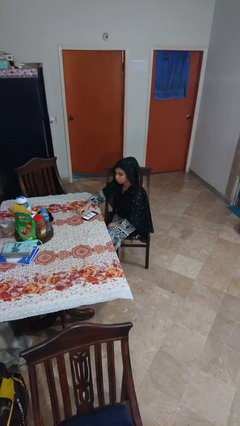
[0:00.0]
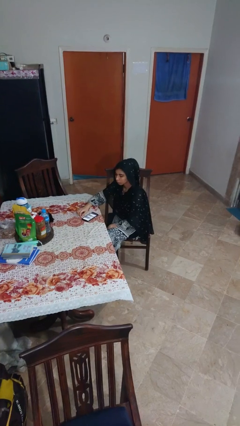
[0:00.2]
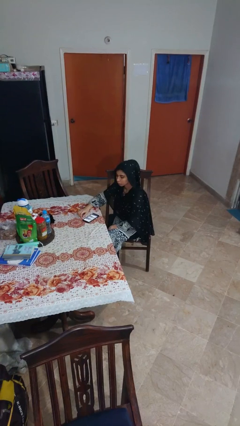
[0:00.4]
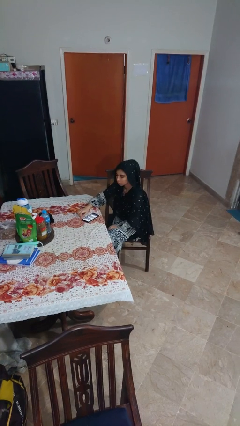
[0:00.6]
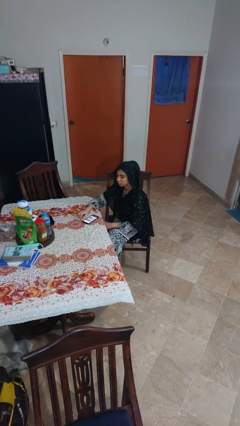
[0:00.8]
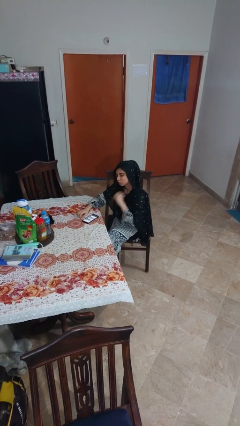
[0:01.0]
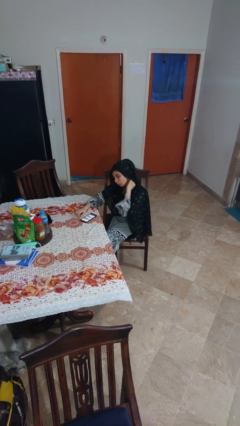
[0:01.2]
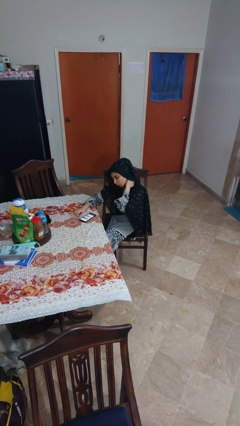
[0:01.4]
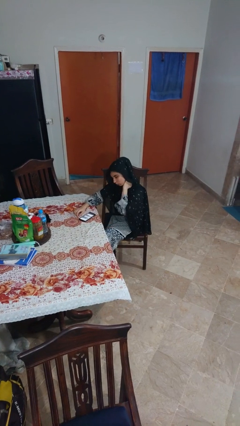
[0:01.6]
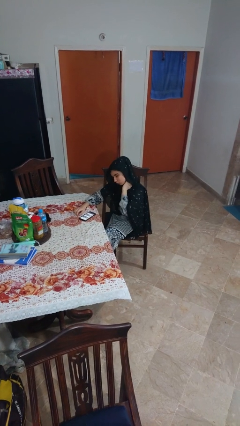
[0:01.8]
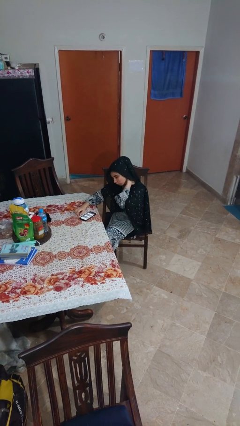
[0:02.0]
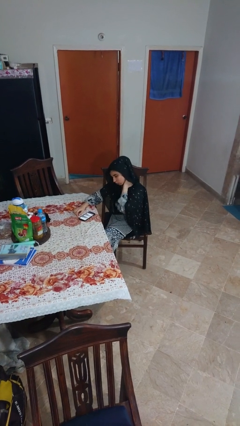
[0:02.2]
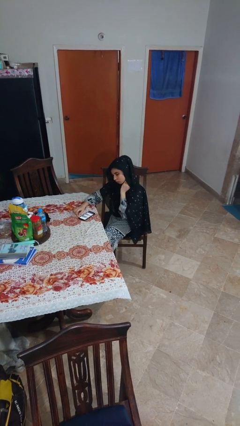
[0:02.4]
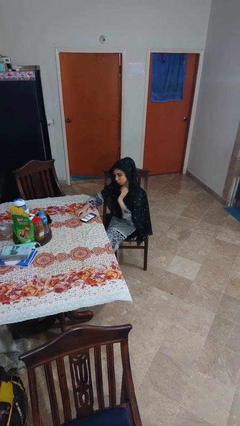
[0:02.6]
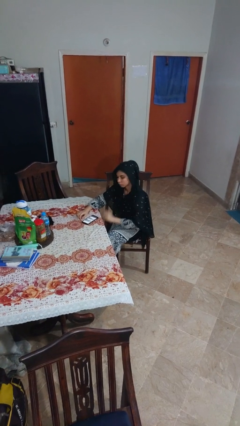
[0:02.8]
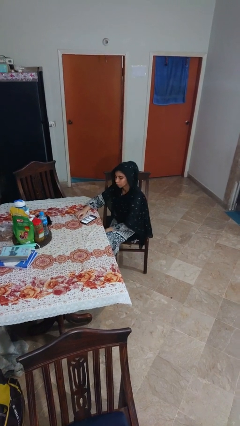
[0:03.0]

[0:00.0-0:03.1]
person rubs neck

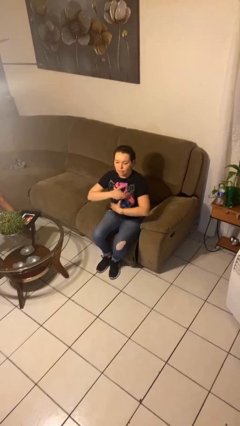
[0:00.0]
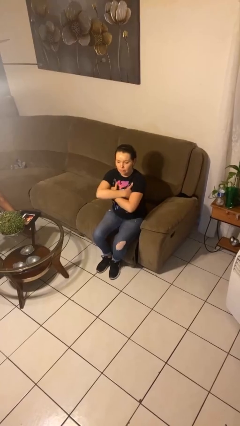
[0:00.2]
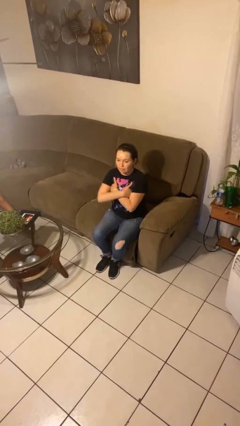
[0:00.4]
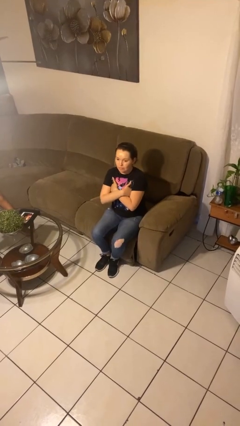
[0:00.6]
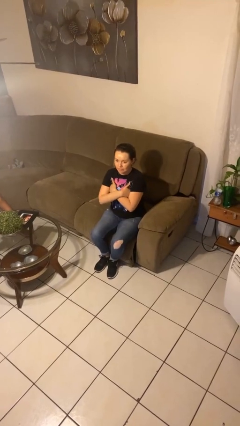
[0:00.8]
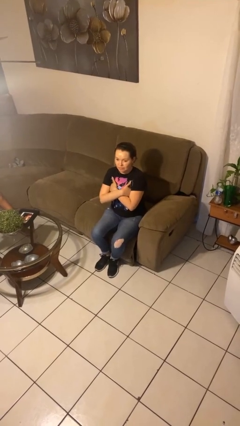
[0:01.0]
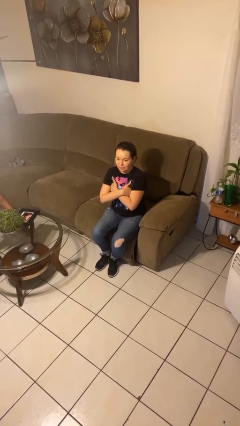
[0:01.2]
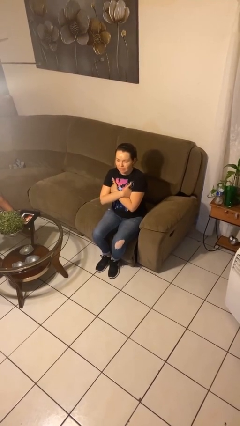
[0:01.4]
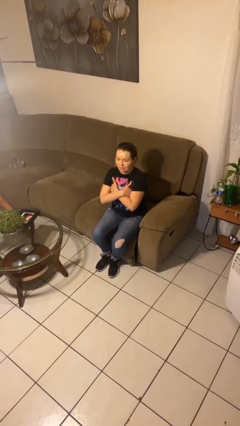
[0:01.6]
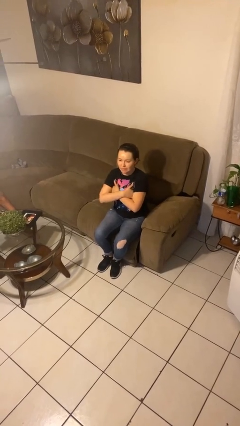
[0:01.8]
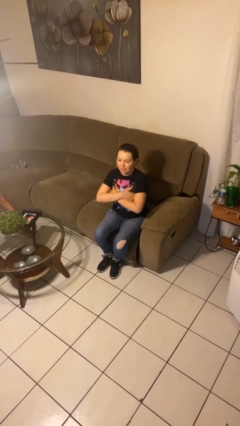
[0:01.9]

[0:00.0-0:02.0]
person gestures arms x

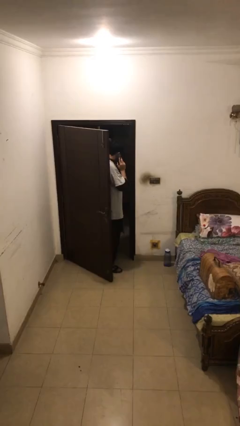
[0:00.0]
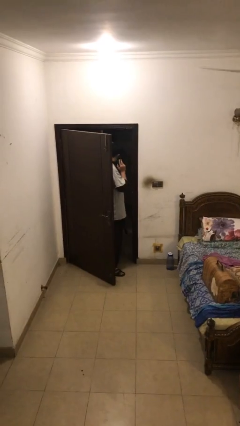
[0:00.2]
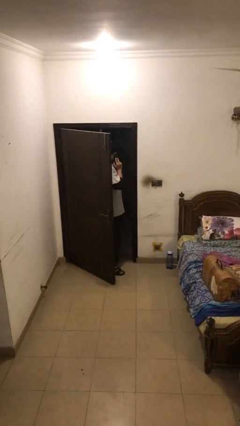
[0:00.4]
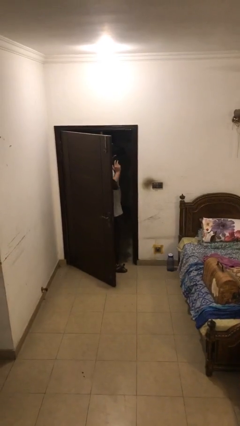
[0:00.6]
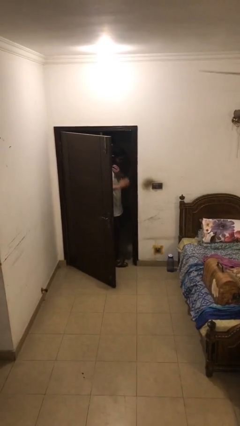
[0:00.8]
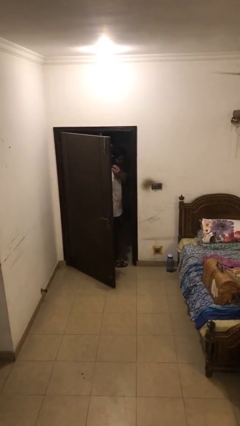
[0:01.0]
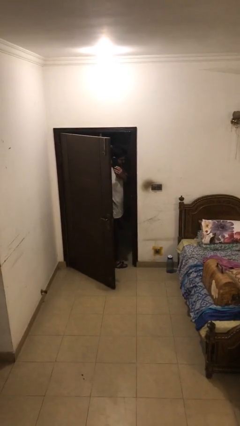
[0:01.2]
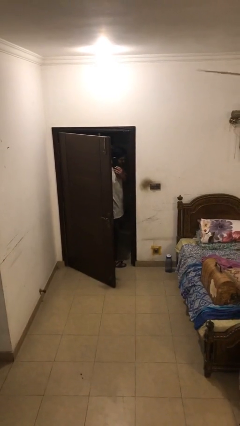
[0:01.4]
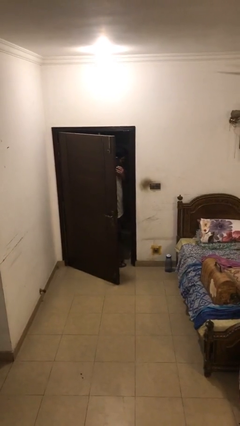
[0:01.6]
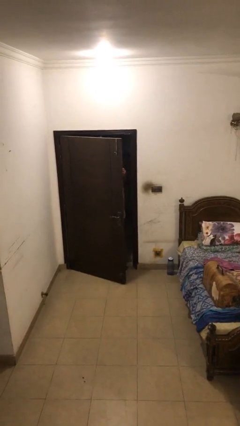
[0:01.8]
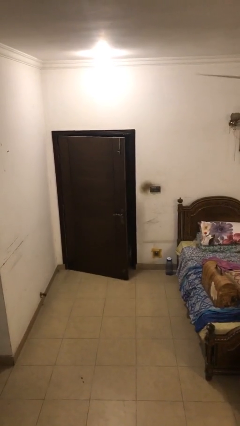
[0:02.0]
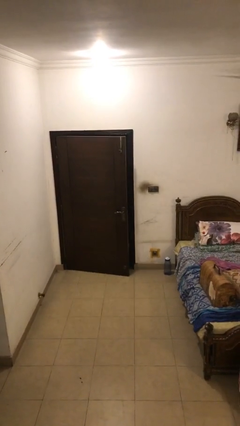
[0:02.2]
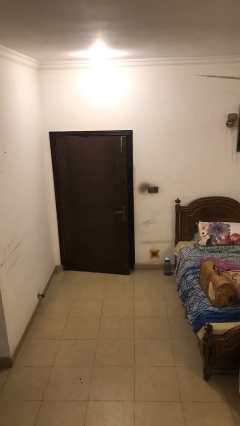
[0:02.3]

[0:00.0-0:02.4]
person closes facility door

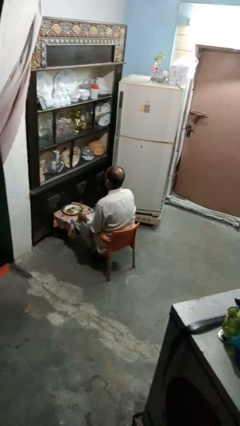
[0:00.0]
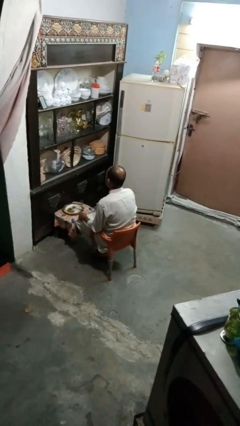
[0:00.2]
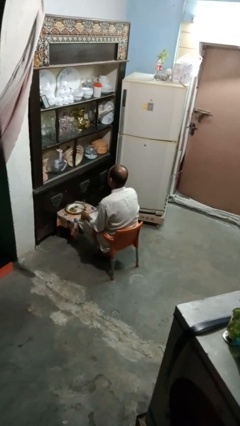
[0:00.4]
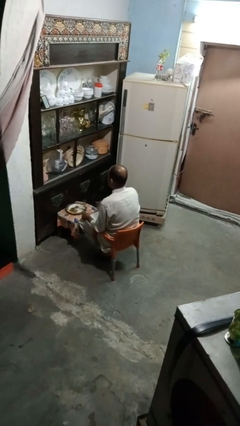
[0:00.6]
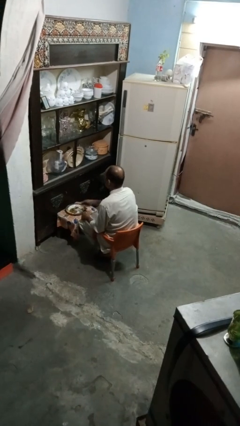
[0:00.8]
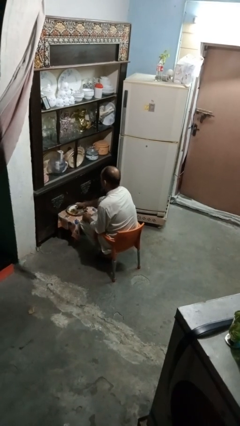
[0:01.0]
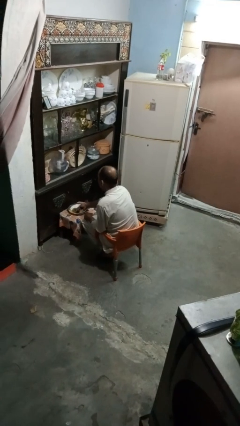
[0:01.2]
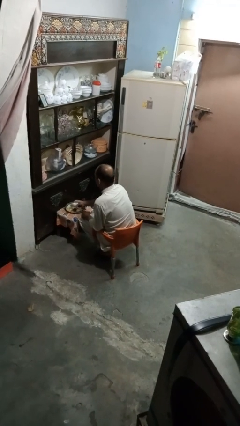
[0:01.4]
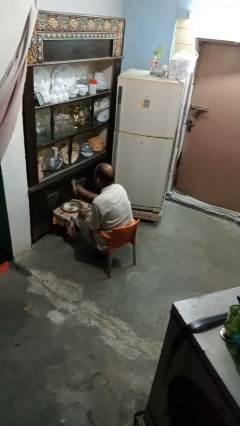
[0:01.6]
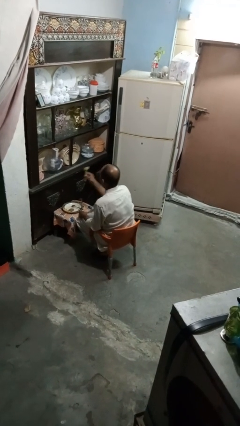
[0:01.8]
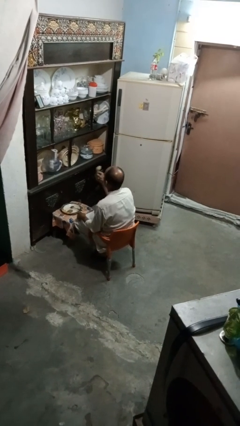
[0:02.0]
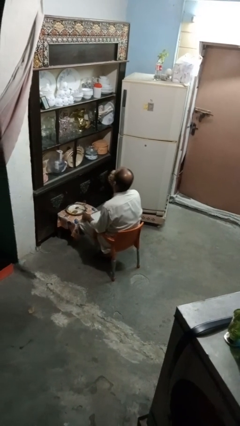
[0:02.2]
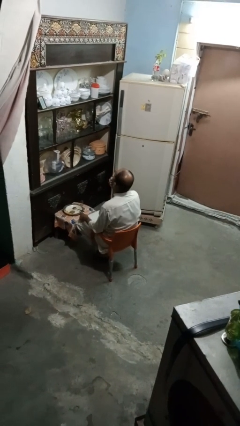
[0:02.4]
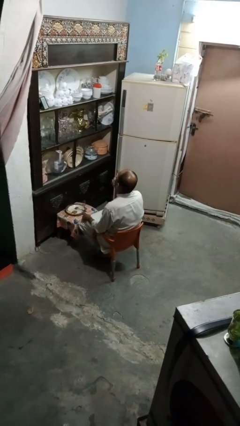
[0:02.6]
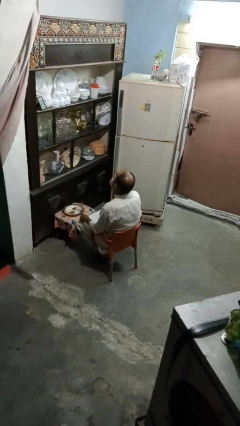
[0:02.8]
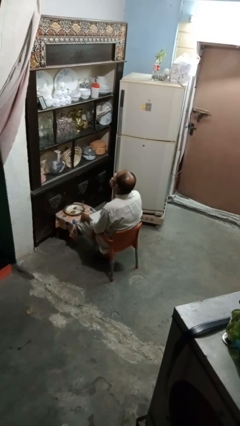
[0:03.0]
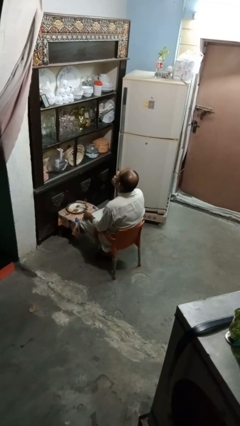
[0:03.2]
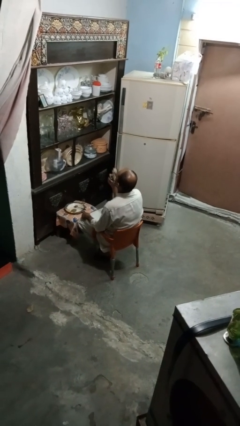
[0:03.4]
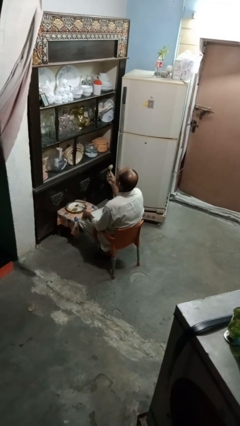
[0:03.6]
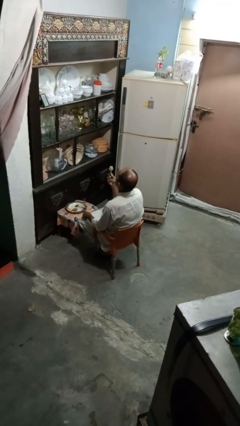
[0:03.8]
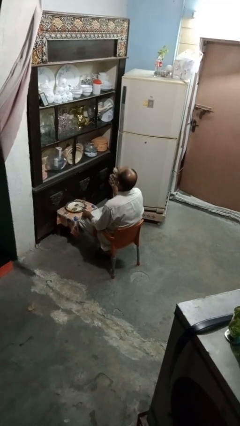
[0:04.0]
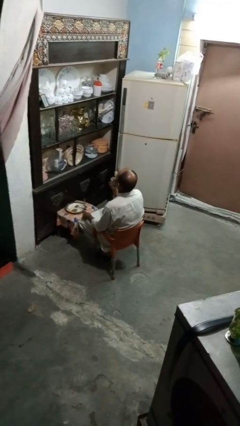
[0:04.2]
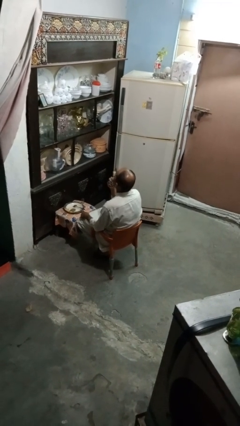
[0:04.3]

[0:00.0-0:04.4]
person eats with utensil

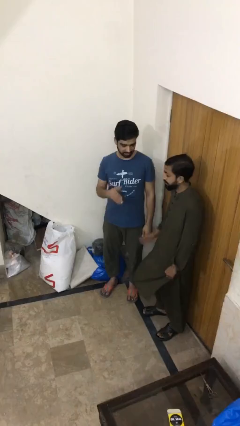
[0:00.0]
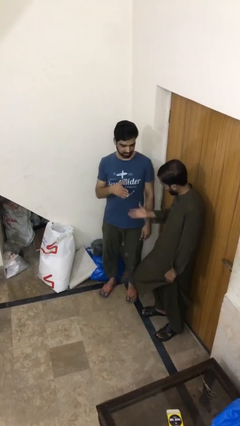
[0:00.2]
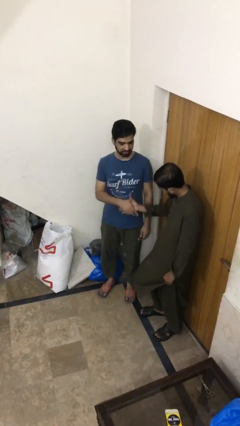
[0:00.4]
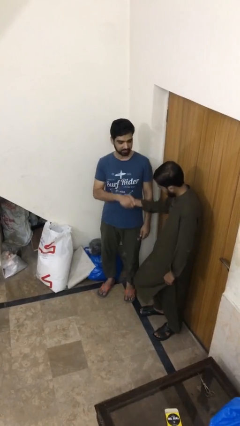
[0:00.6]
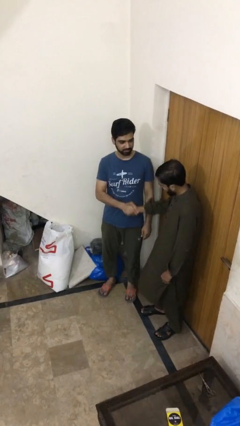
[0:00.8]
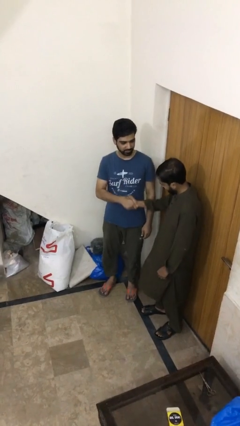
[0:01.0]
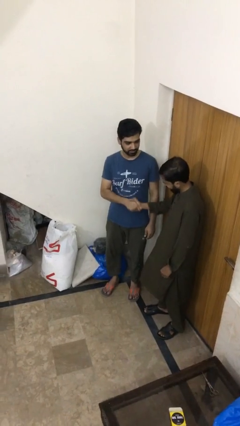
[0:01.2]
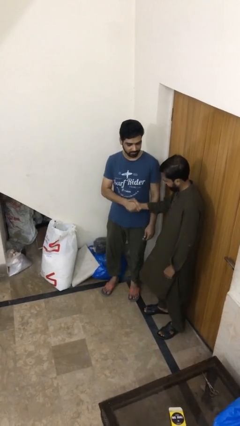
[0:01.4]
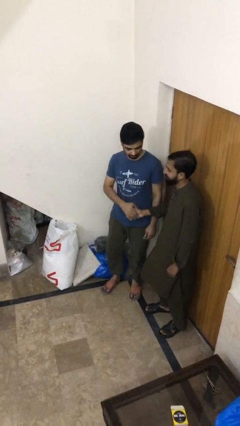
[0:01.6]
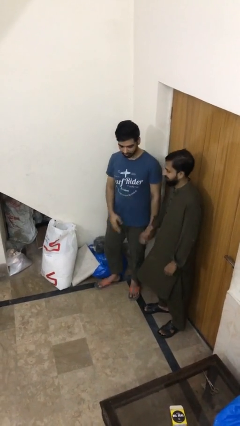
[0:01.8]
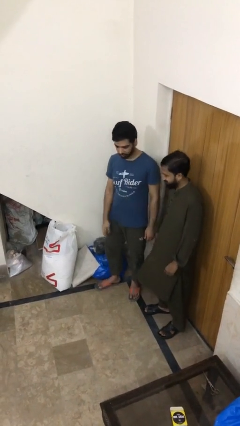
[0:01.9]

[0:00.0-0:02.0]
person shakes hand

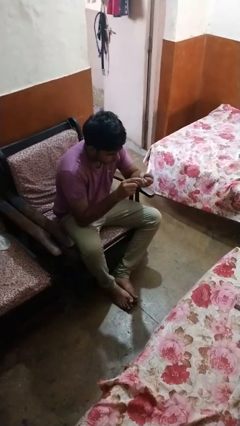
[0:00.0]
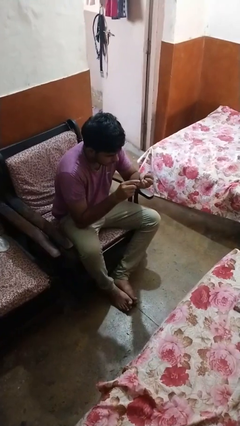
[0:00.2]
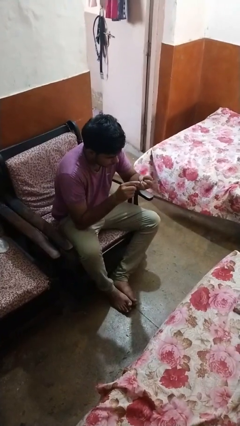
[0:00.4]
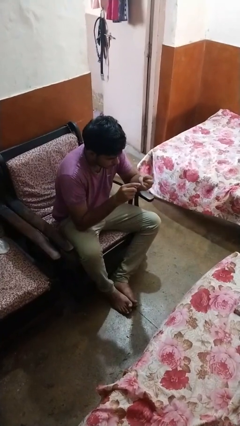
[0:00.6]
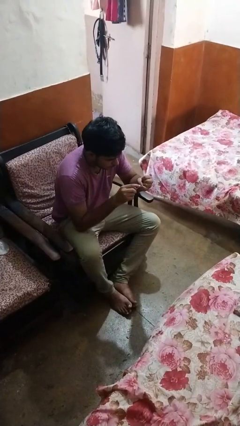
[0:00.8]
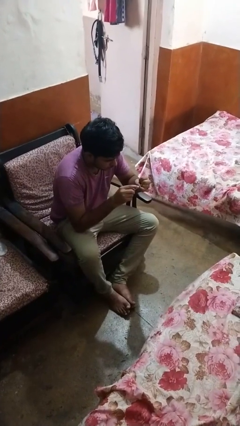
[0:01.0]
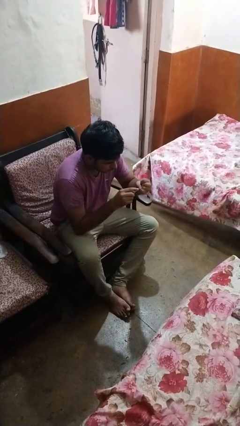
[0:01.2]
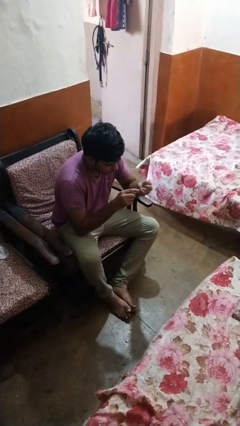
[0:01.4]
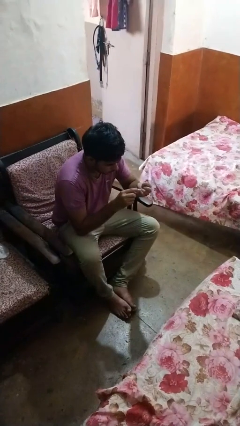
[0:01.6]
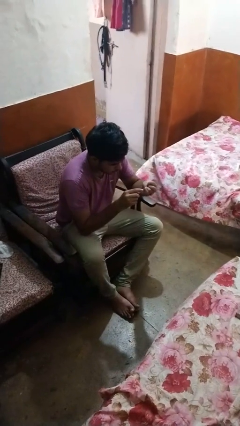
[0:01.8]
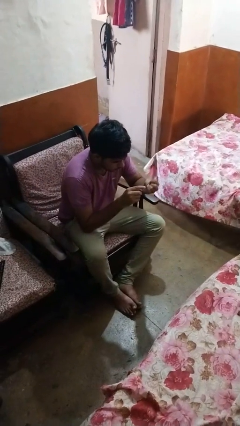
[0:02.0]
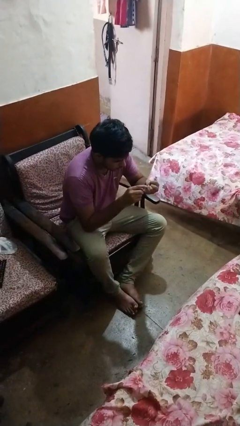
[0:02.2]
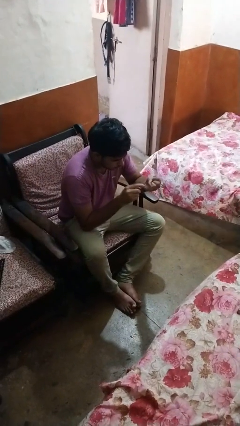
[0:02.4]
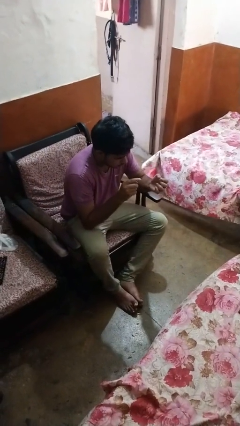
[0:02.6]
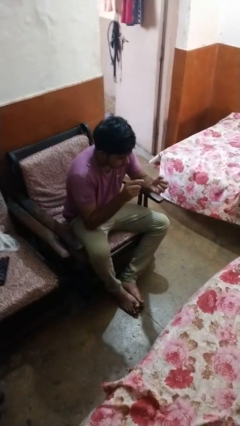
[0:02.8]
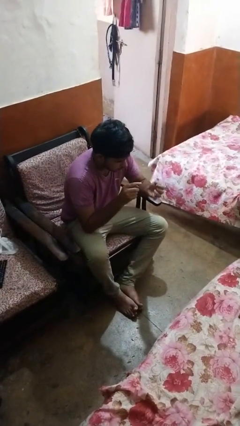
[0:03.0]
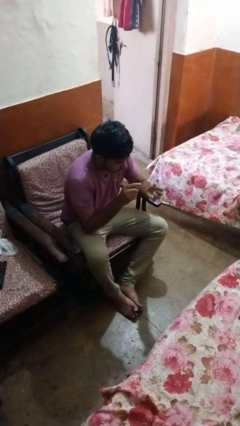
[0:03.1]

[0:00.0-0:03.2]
person files fingernails
